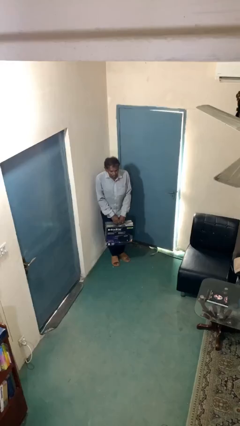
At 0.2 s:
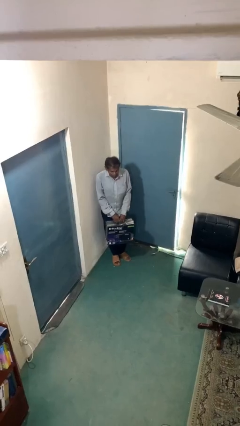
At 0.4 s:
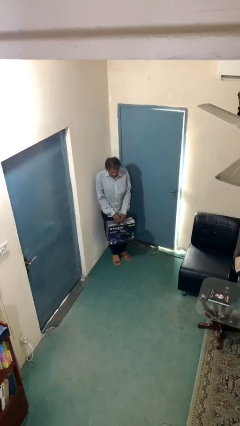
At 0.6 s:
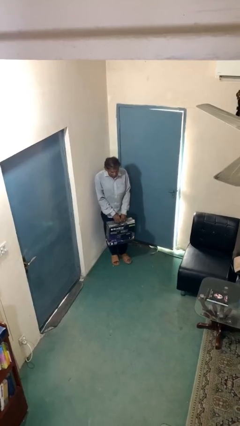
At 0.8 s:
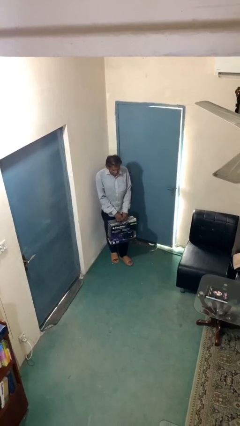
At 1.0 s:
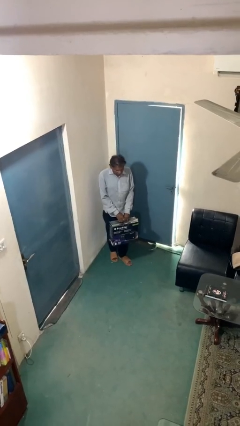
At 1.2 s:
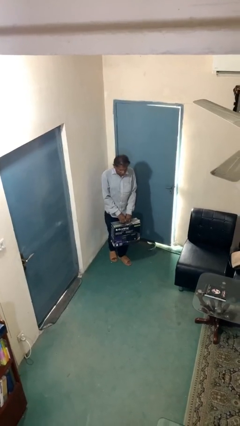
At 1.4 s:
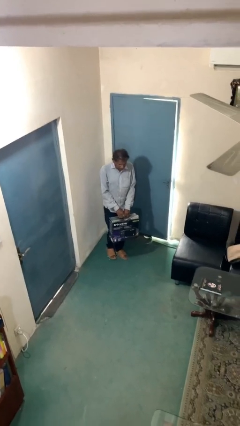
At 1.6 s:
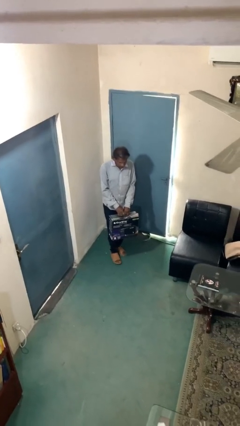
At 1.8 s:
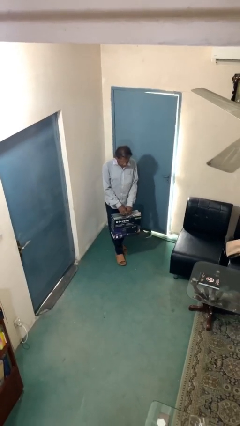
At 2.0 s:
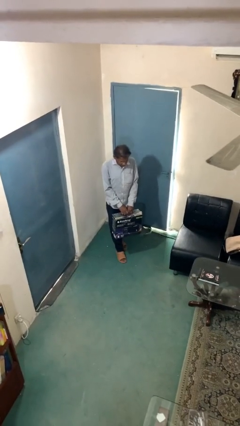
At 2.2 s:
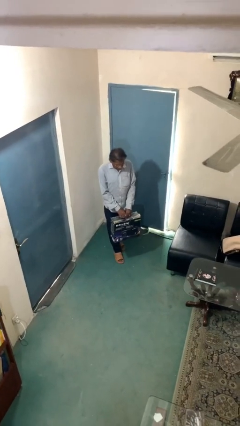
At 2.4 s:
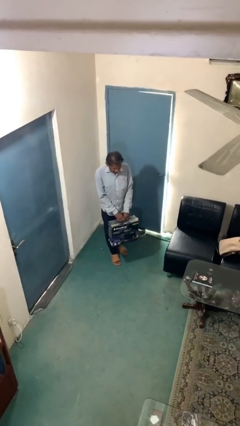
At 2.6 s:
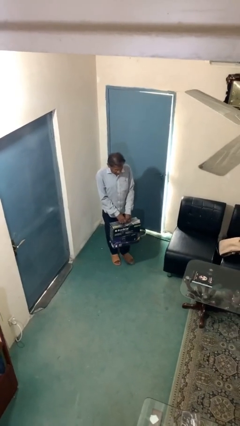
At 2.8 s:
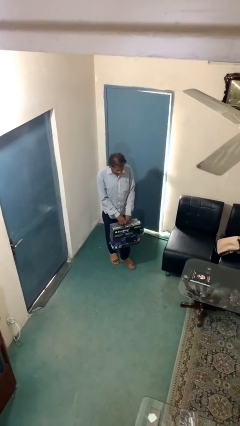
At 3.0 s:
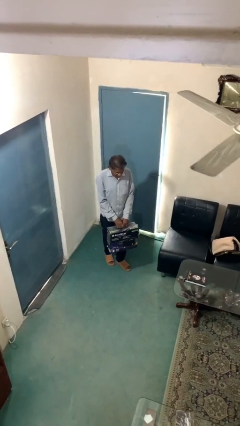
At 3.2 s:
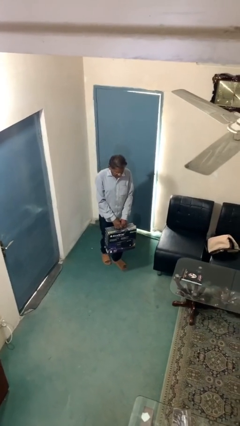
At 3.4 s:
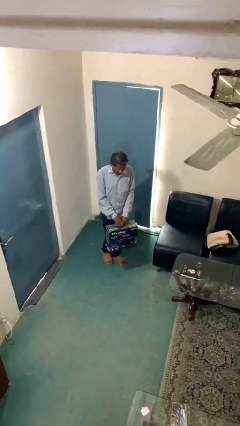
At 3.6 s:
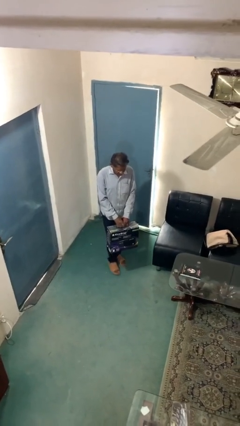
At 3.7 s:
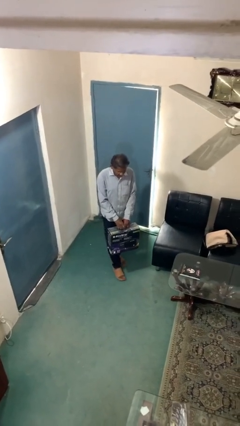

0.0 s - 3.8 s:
person carries heavy object

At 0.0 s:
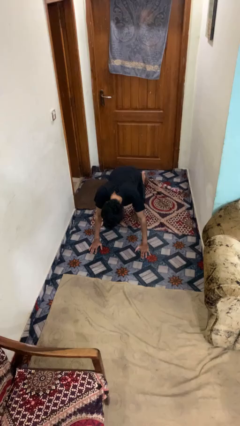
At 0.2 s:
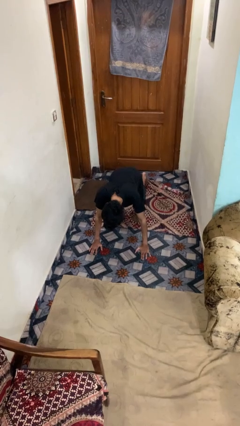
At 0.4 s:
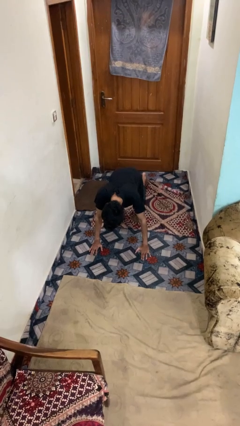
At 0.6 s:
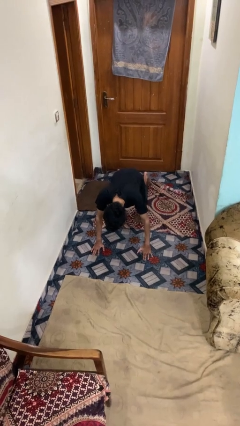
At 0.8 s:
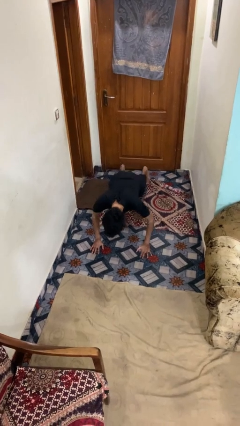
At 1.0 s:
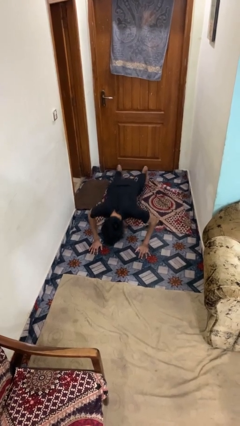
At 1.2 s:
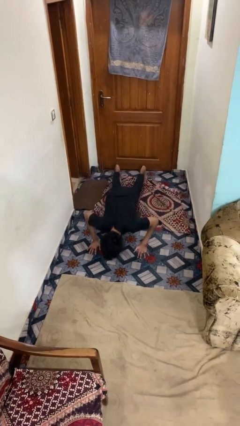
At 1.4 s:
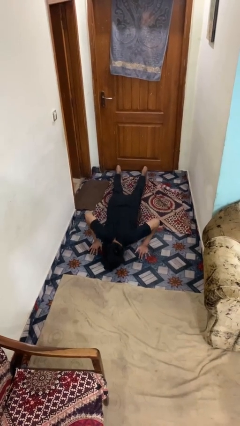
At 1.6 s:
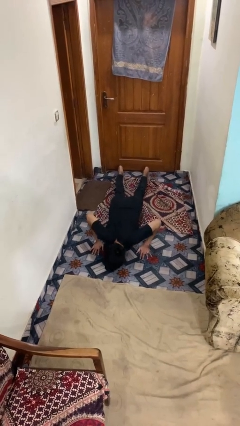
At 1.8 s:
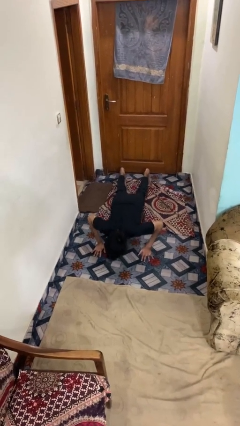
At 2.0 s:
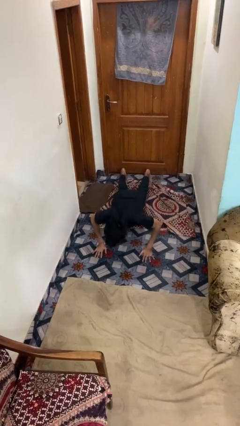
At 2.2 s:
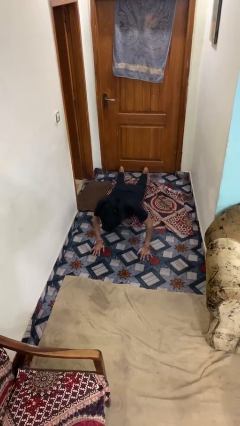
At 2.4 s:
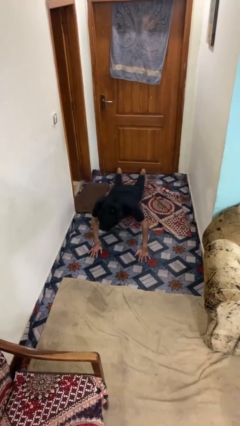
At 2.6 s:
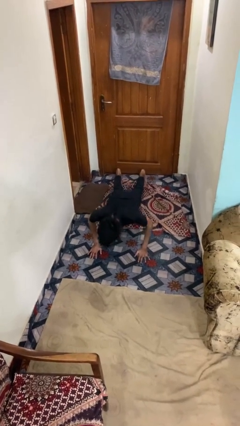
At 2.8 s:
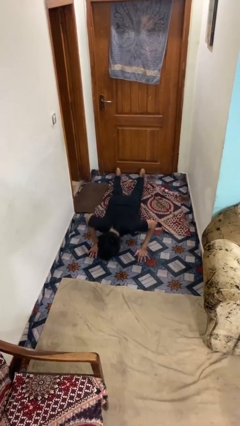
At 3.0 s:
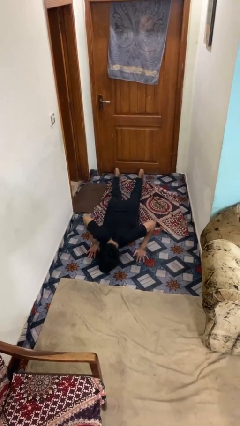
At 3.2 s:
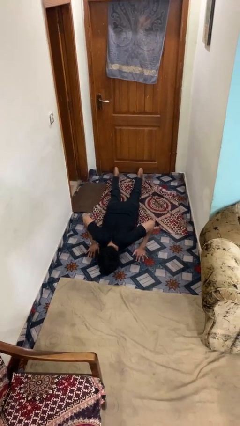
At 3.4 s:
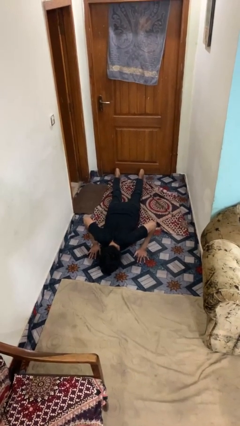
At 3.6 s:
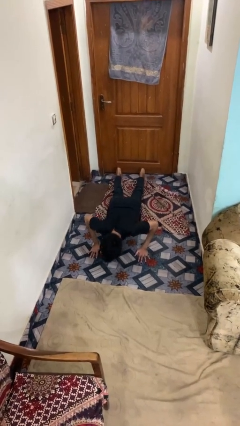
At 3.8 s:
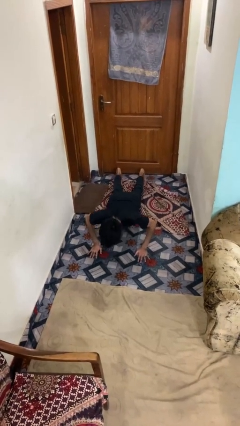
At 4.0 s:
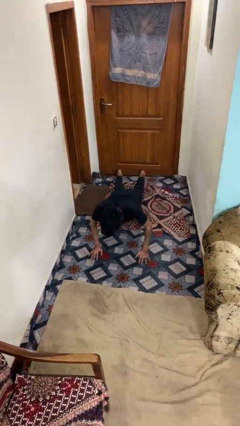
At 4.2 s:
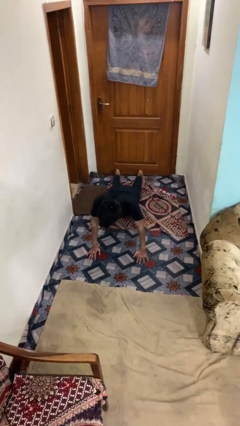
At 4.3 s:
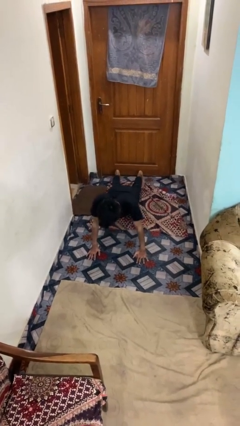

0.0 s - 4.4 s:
person exercises with pushup

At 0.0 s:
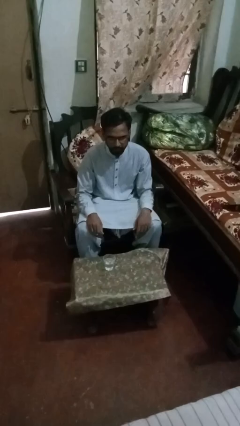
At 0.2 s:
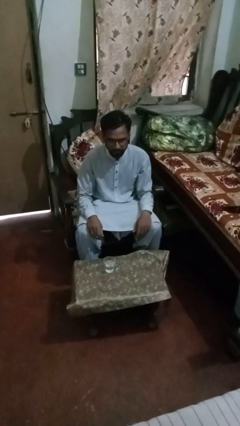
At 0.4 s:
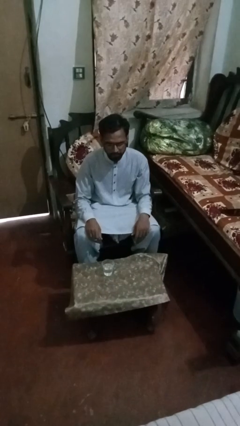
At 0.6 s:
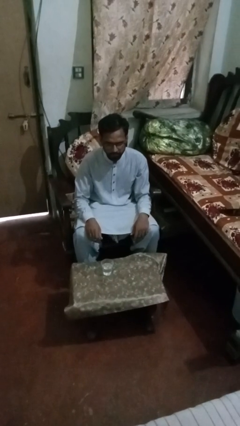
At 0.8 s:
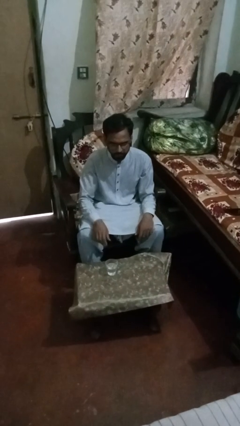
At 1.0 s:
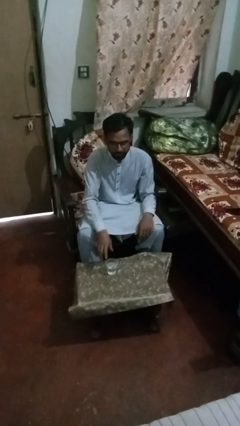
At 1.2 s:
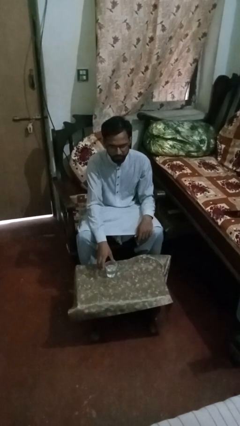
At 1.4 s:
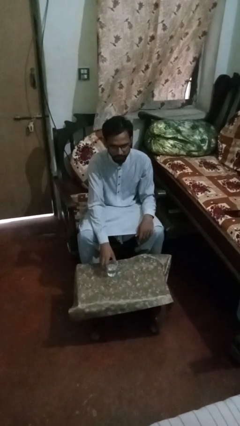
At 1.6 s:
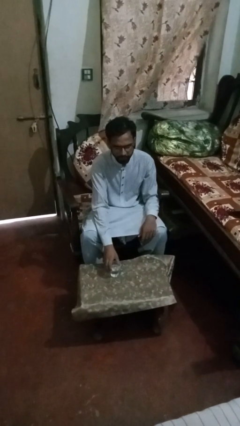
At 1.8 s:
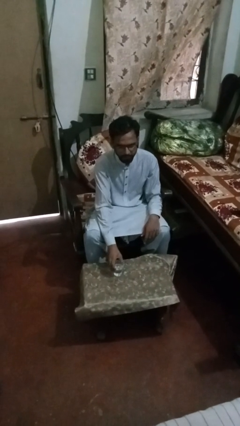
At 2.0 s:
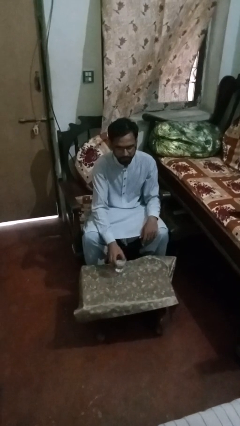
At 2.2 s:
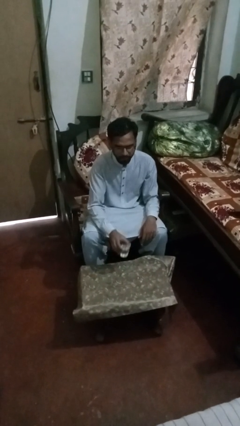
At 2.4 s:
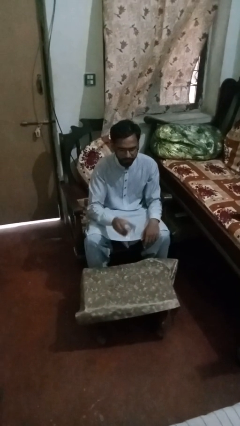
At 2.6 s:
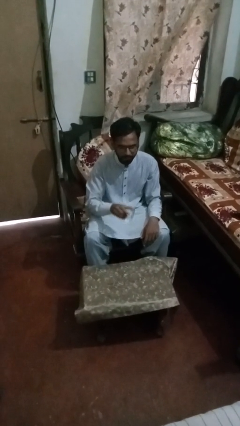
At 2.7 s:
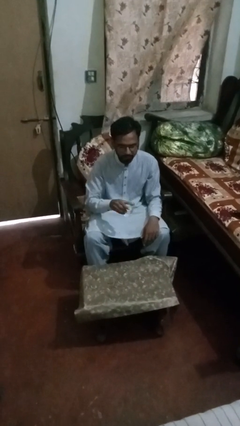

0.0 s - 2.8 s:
person picks up object from table

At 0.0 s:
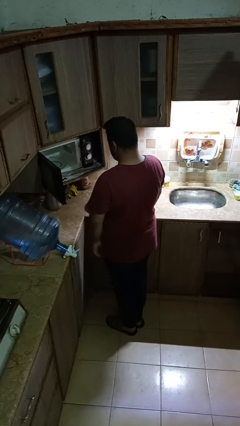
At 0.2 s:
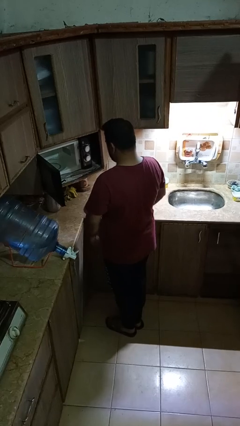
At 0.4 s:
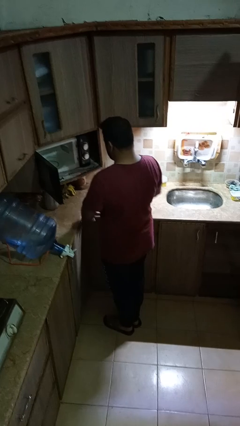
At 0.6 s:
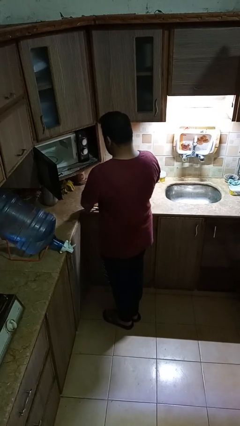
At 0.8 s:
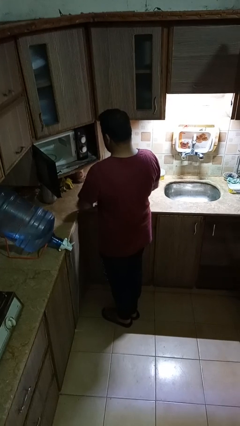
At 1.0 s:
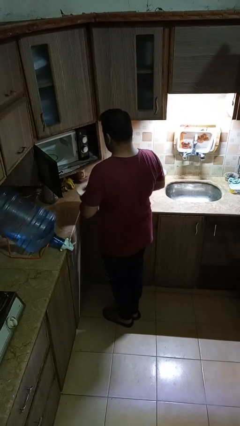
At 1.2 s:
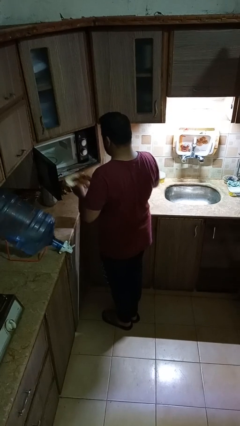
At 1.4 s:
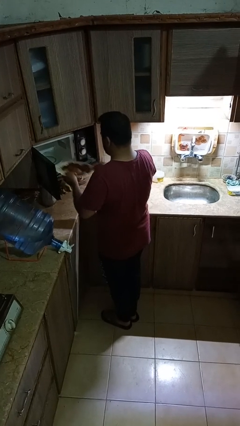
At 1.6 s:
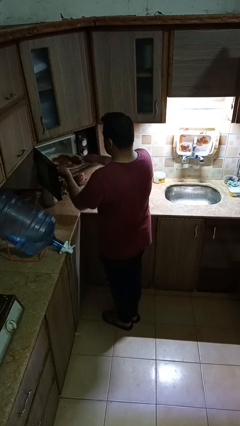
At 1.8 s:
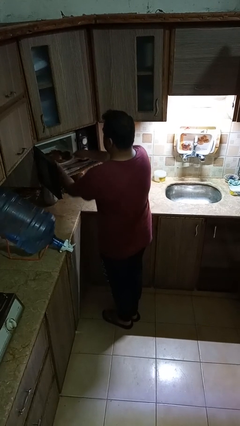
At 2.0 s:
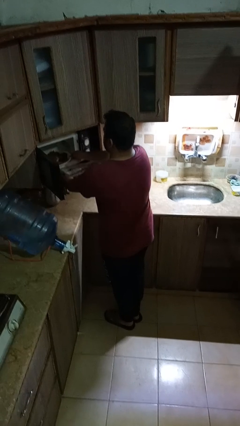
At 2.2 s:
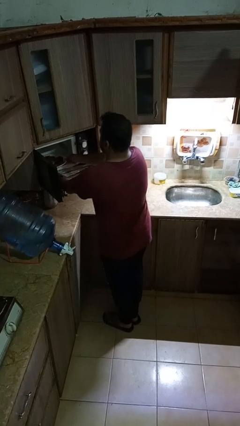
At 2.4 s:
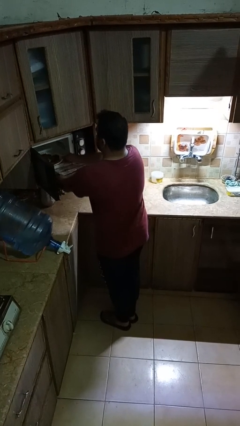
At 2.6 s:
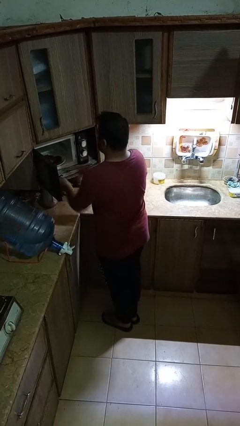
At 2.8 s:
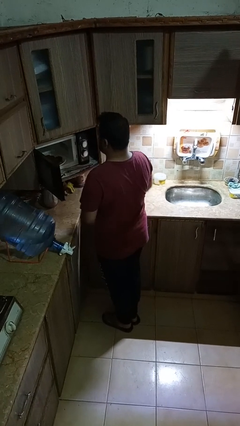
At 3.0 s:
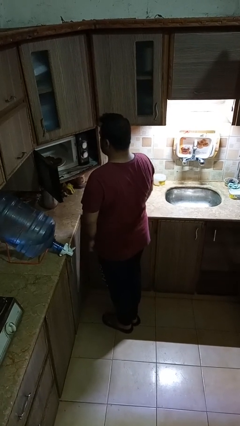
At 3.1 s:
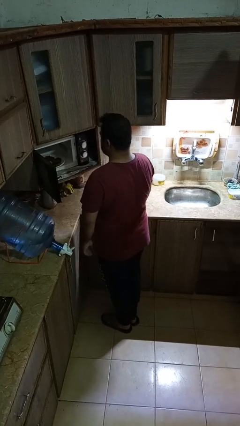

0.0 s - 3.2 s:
person puts object into microwave

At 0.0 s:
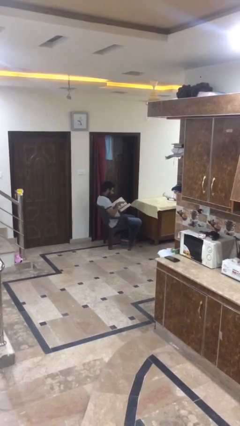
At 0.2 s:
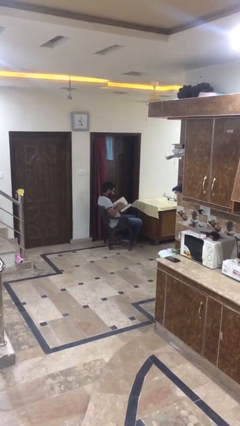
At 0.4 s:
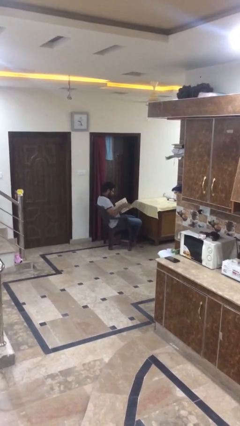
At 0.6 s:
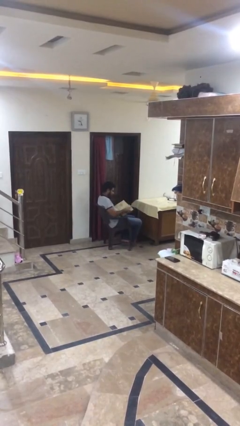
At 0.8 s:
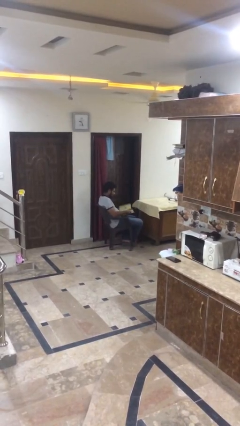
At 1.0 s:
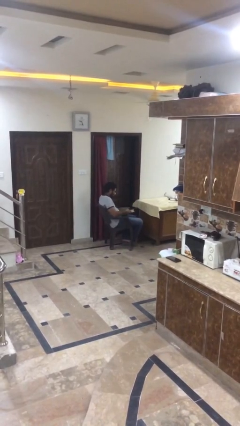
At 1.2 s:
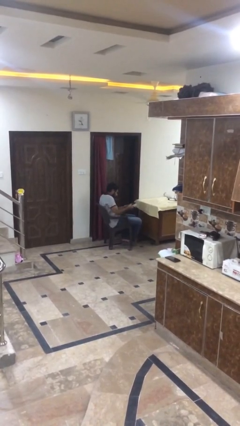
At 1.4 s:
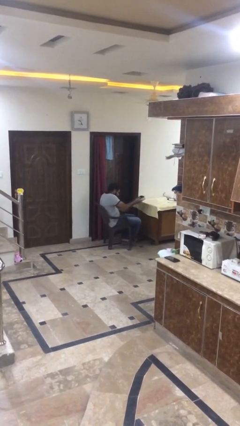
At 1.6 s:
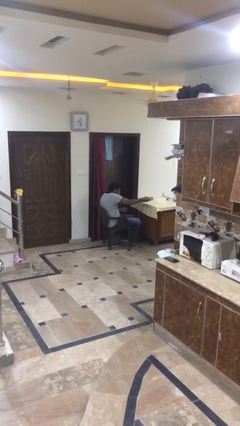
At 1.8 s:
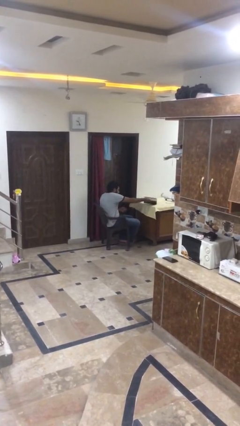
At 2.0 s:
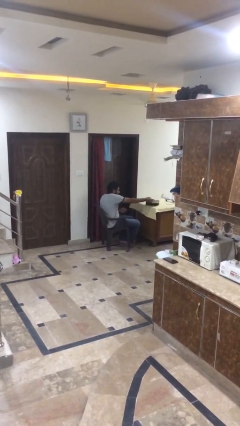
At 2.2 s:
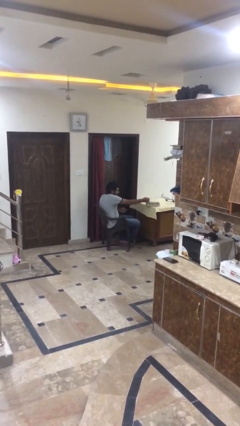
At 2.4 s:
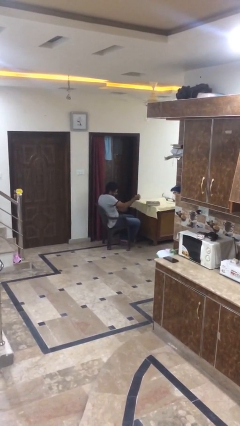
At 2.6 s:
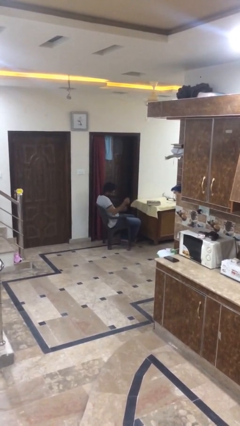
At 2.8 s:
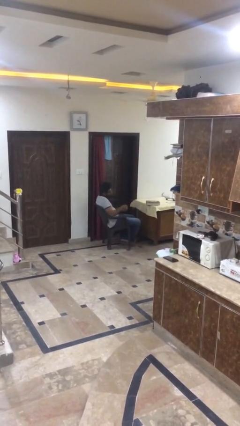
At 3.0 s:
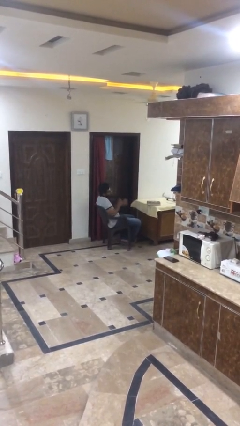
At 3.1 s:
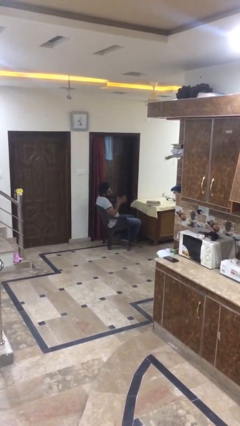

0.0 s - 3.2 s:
person puts down object on table
